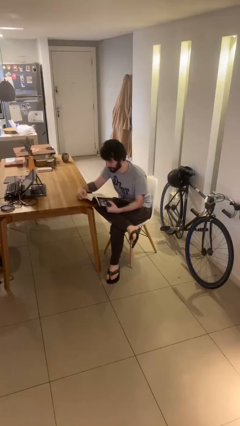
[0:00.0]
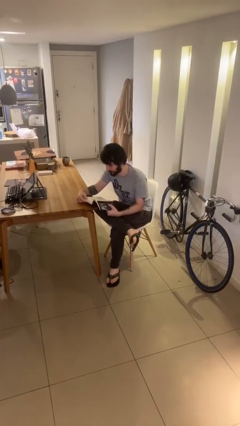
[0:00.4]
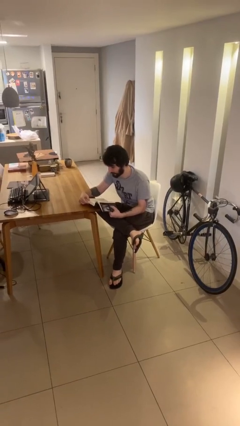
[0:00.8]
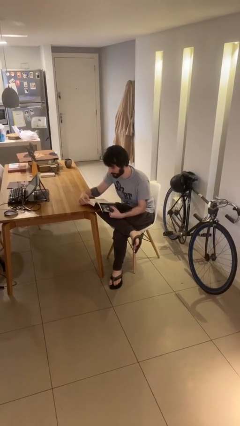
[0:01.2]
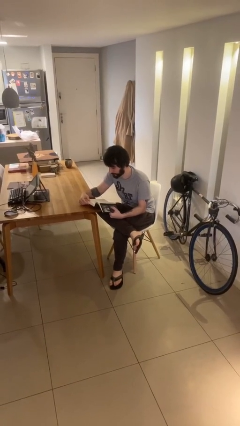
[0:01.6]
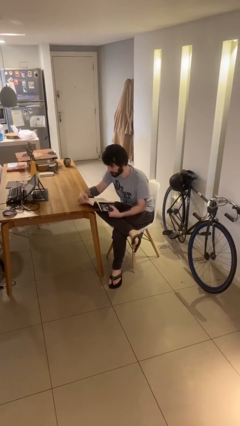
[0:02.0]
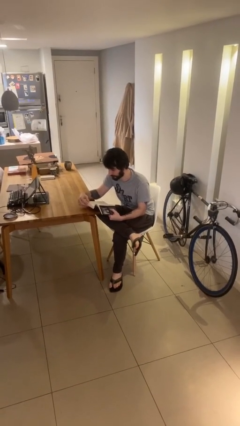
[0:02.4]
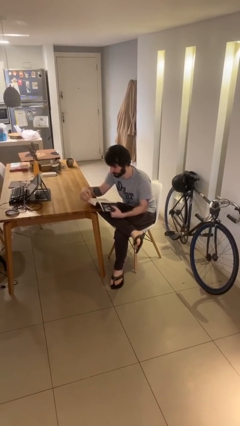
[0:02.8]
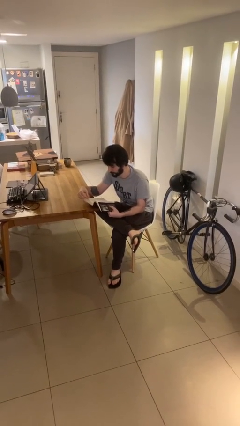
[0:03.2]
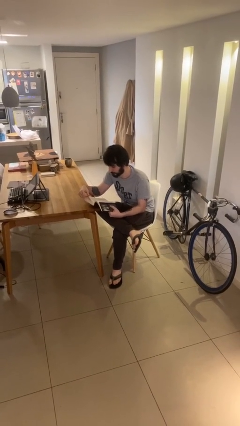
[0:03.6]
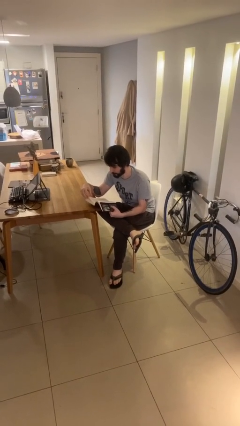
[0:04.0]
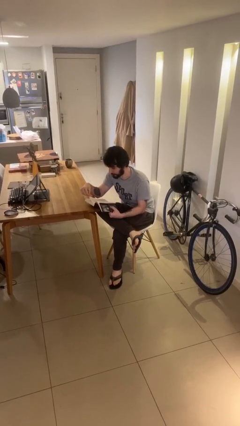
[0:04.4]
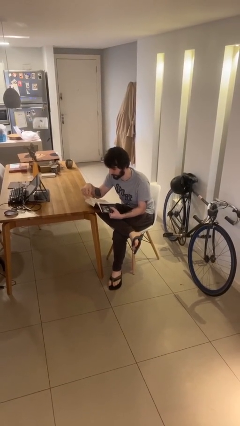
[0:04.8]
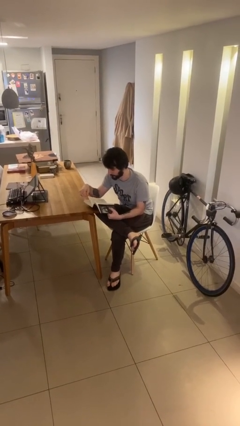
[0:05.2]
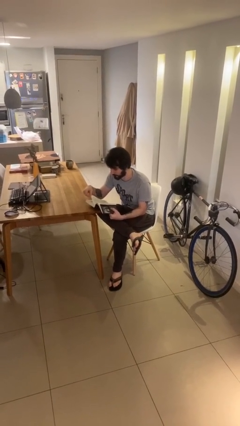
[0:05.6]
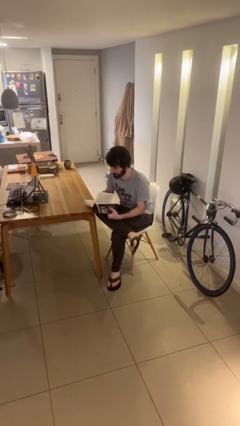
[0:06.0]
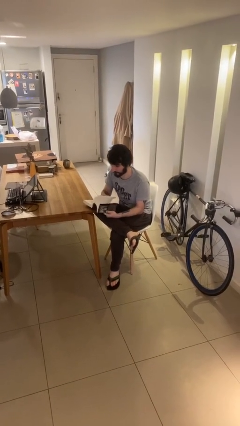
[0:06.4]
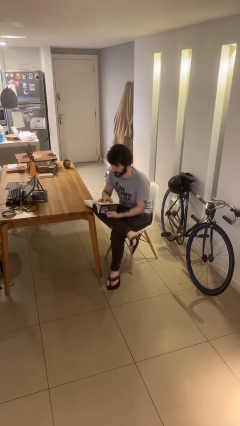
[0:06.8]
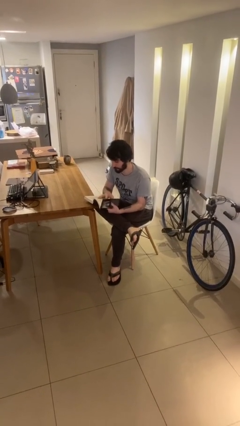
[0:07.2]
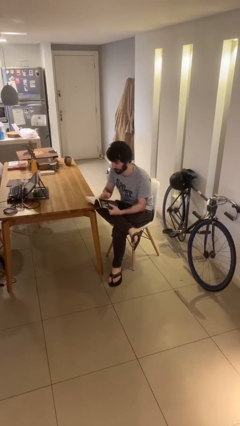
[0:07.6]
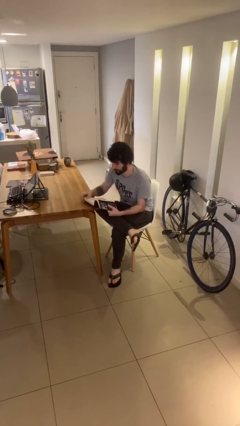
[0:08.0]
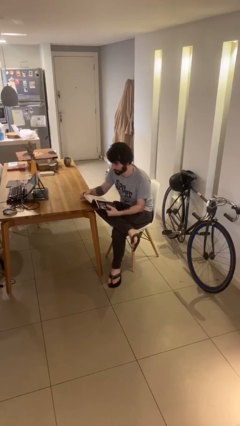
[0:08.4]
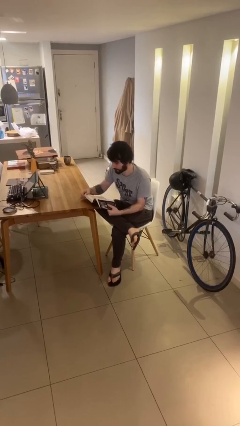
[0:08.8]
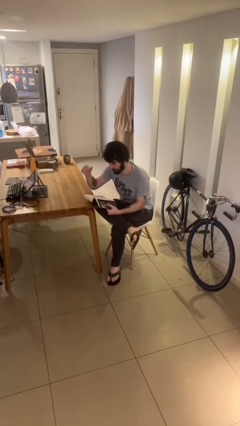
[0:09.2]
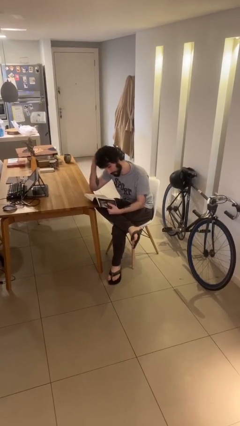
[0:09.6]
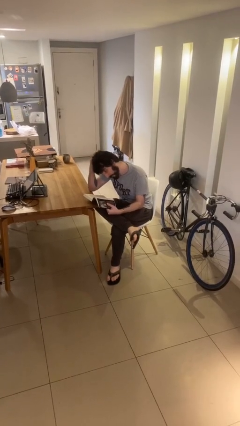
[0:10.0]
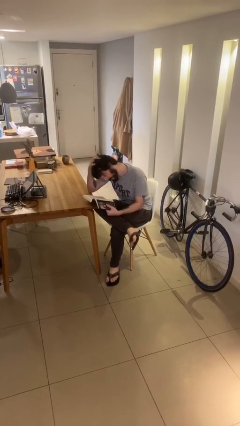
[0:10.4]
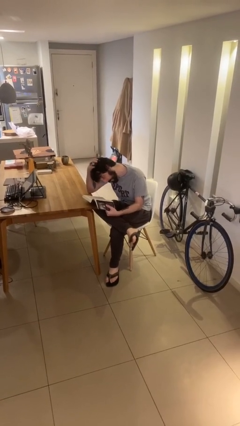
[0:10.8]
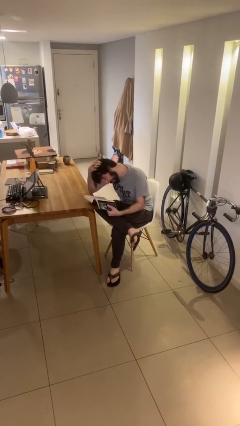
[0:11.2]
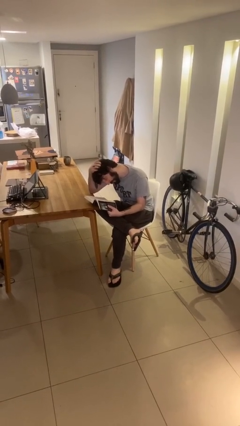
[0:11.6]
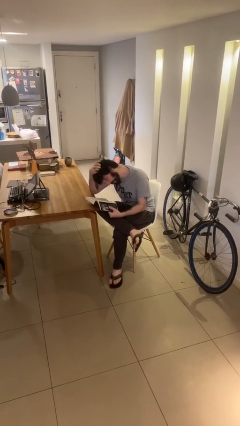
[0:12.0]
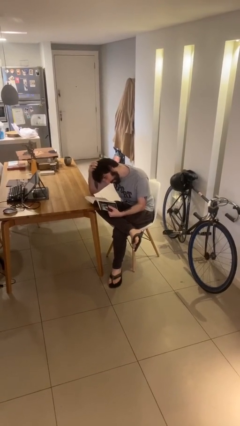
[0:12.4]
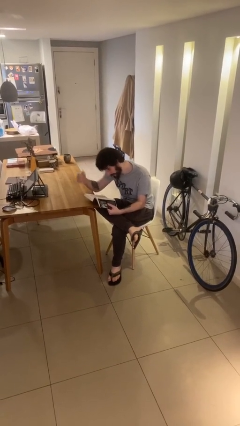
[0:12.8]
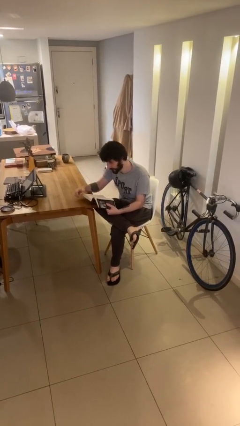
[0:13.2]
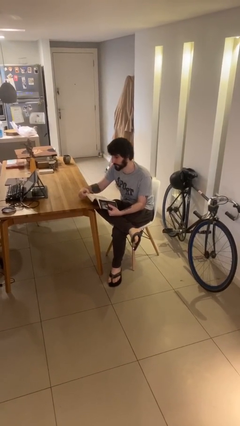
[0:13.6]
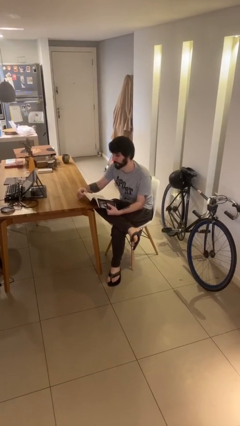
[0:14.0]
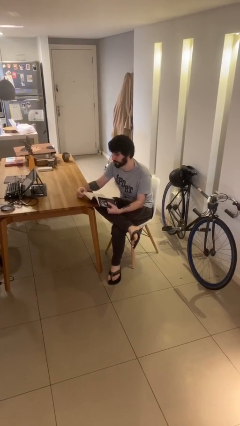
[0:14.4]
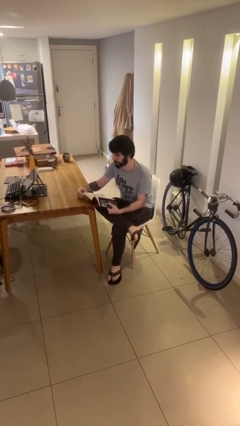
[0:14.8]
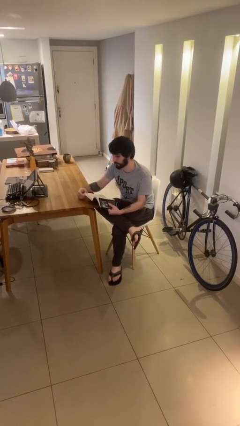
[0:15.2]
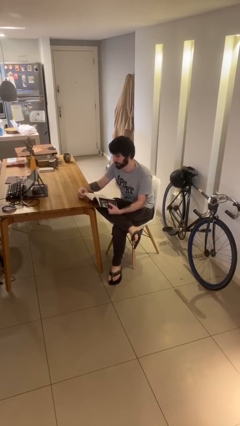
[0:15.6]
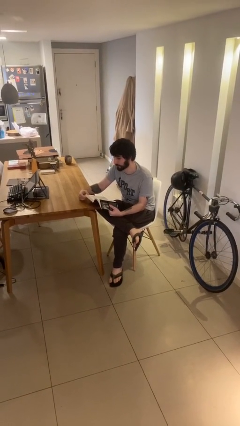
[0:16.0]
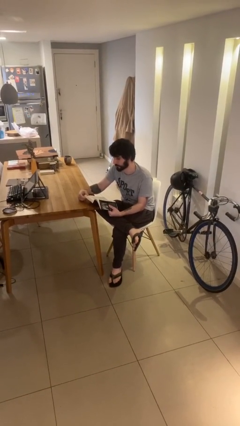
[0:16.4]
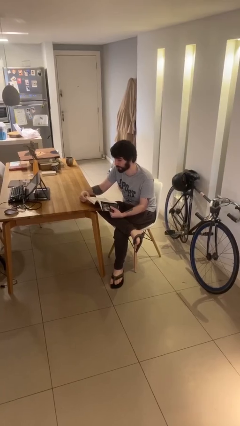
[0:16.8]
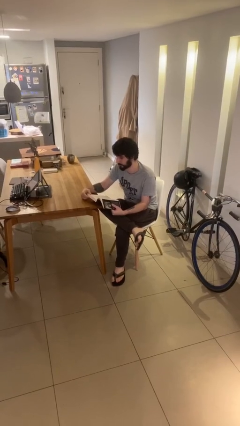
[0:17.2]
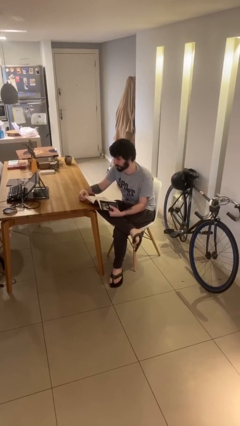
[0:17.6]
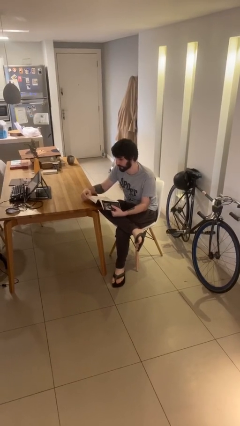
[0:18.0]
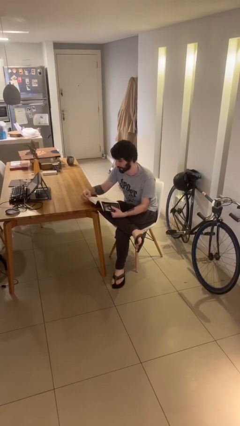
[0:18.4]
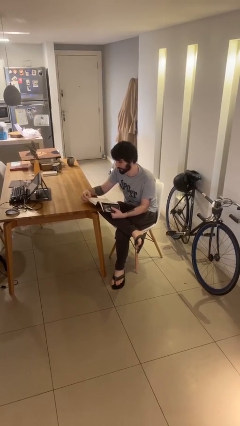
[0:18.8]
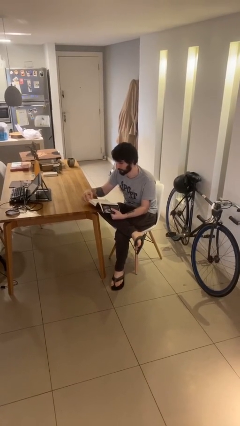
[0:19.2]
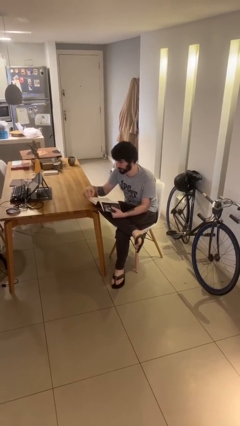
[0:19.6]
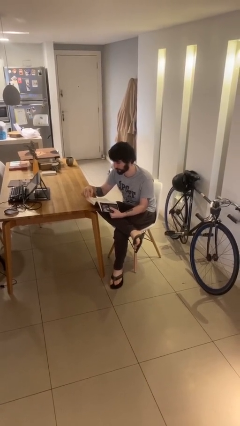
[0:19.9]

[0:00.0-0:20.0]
person reads document

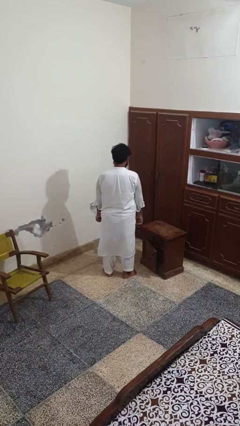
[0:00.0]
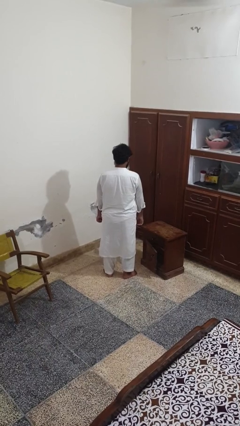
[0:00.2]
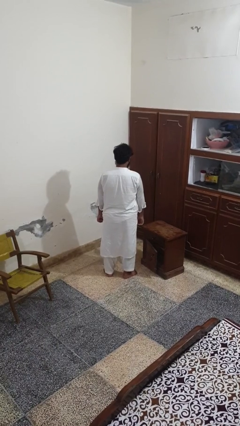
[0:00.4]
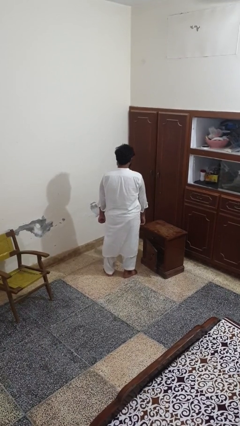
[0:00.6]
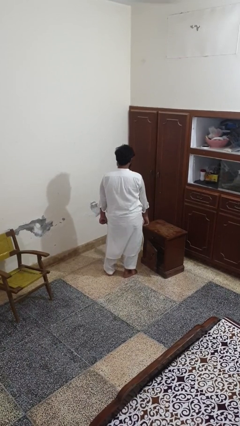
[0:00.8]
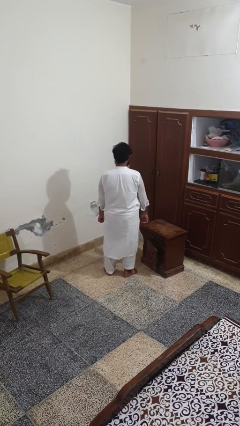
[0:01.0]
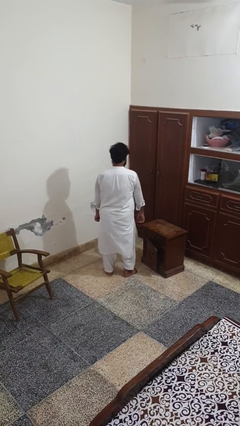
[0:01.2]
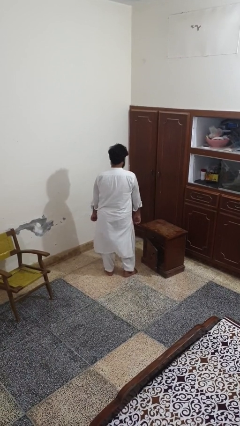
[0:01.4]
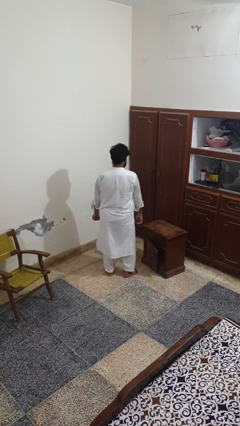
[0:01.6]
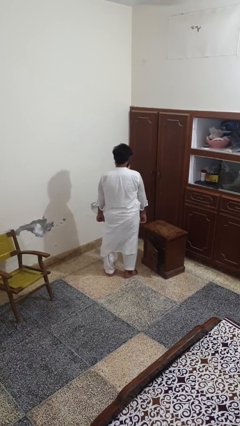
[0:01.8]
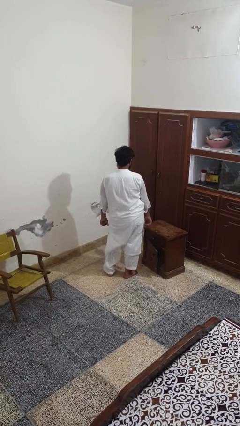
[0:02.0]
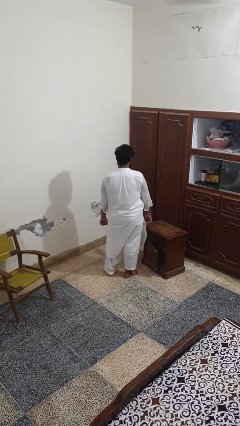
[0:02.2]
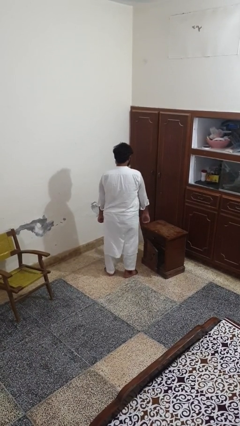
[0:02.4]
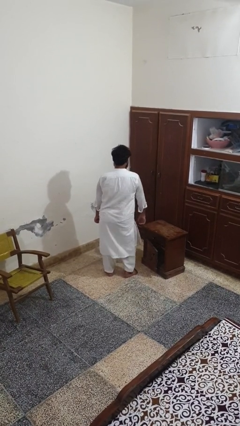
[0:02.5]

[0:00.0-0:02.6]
person wiggles hips

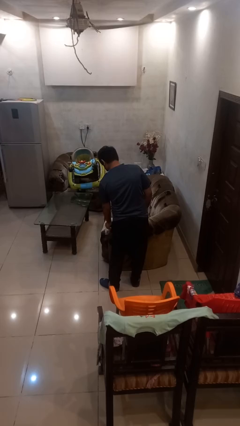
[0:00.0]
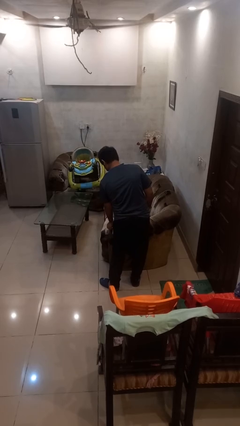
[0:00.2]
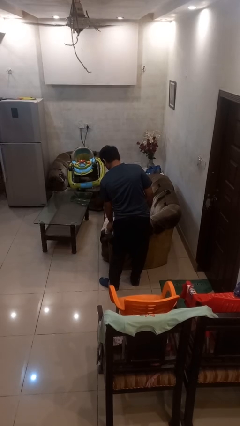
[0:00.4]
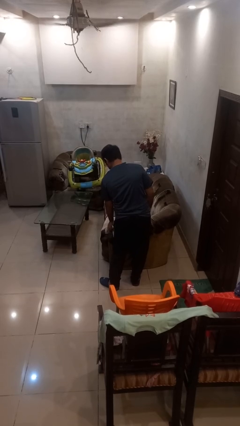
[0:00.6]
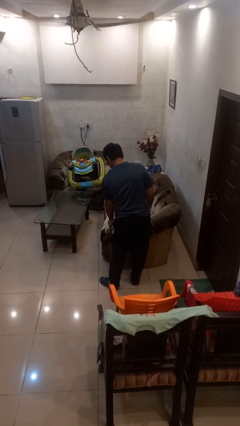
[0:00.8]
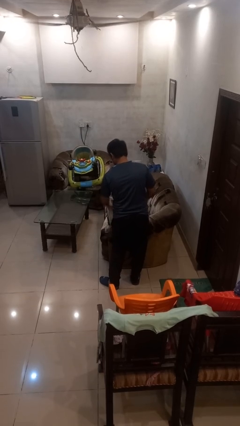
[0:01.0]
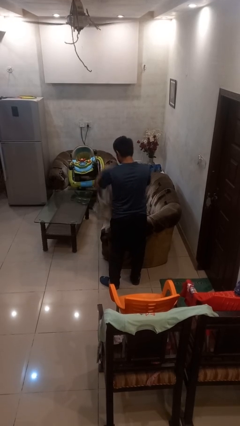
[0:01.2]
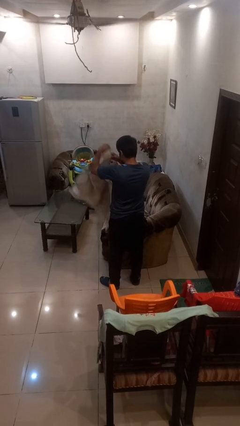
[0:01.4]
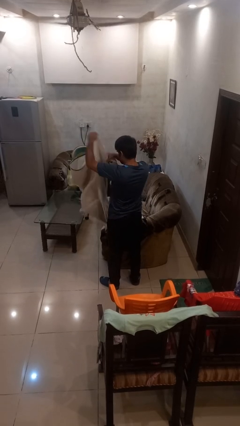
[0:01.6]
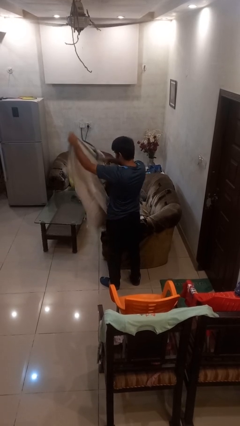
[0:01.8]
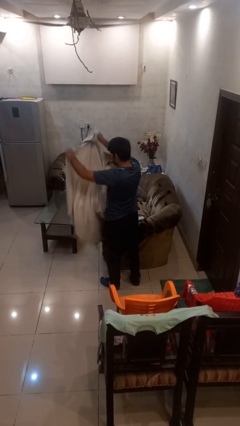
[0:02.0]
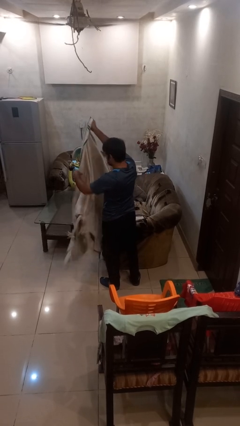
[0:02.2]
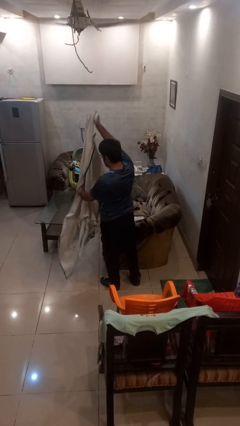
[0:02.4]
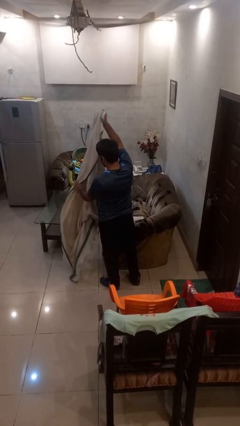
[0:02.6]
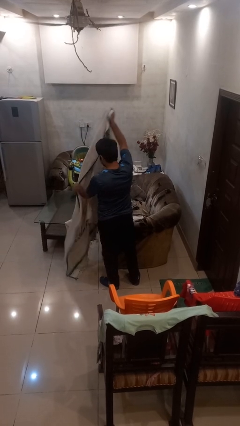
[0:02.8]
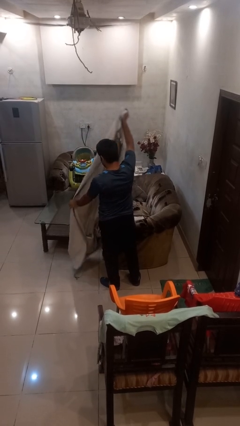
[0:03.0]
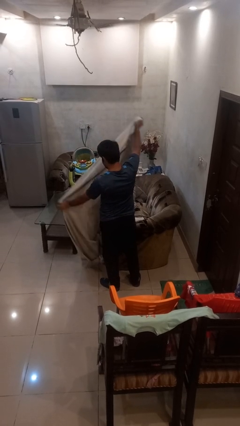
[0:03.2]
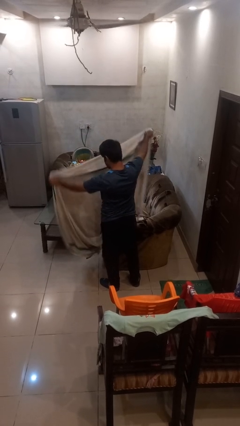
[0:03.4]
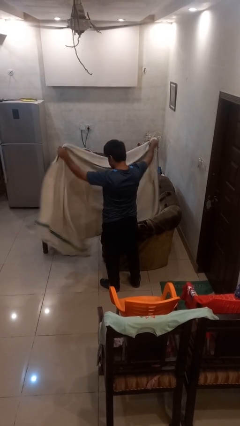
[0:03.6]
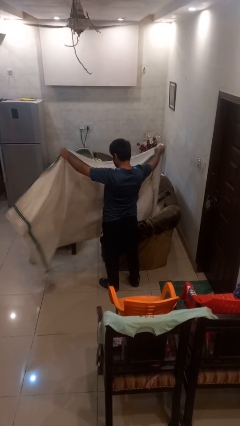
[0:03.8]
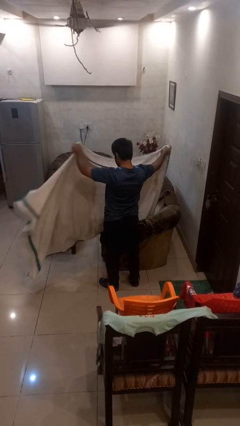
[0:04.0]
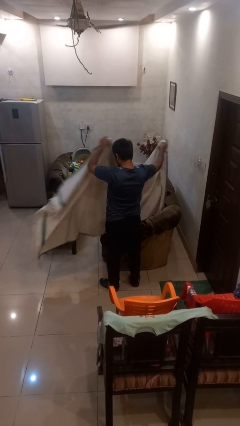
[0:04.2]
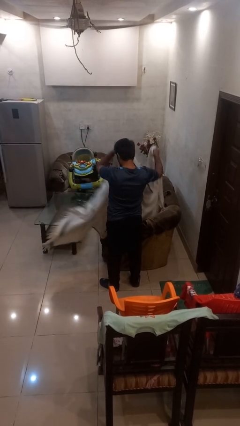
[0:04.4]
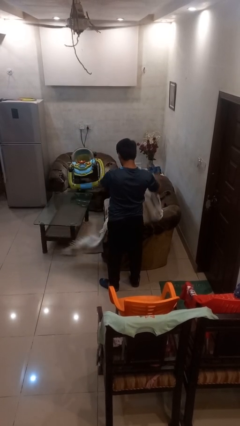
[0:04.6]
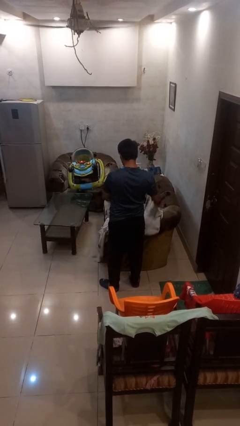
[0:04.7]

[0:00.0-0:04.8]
person unfolds blanket

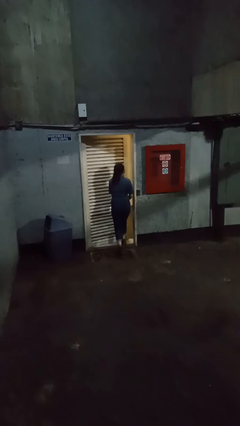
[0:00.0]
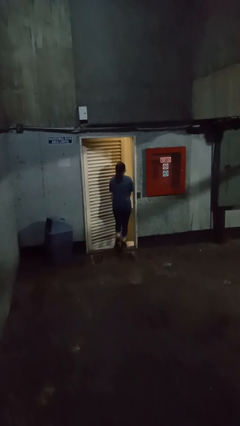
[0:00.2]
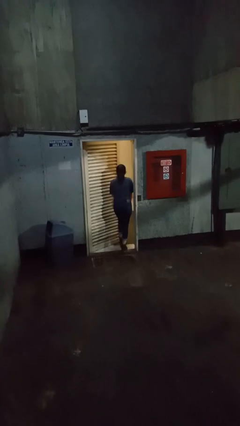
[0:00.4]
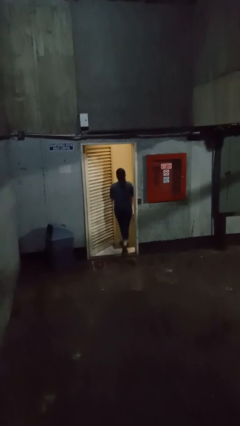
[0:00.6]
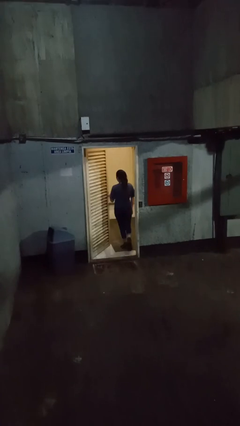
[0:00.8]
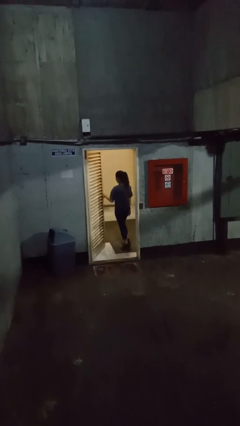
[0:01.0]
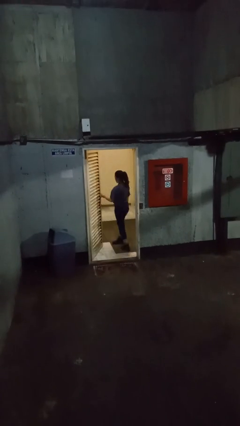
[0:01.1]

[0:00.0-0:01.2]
person opens facility door
